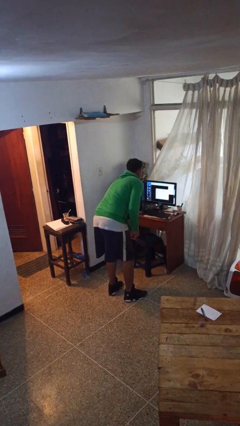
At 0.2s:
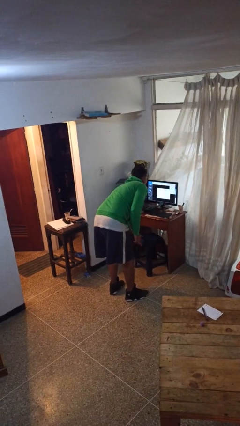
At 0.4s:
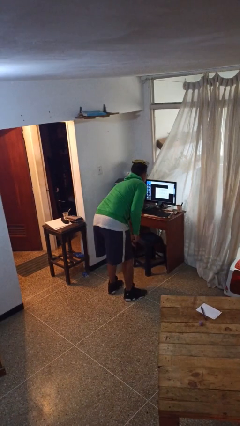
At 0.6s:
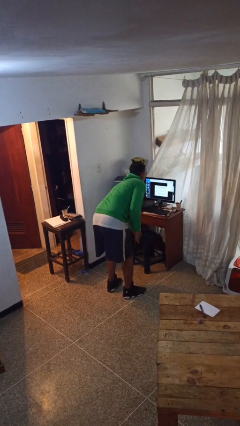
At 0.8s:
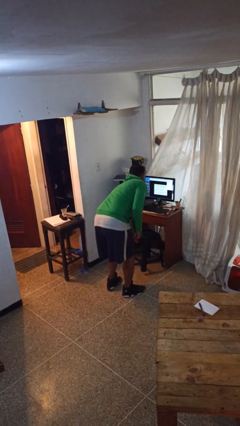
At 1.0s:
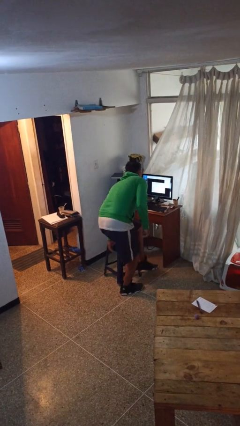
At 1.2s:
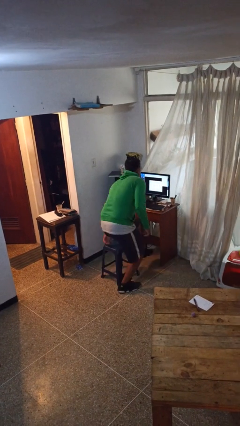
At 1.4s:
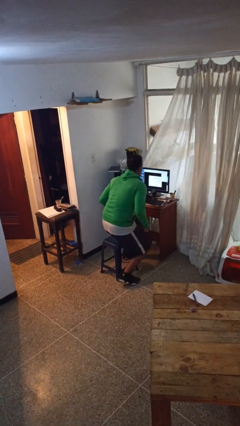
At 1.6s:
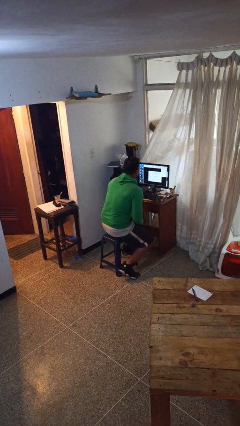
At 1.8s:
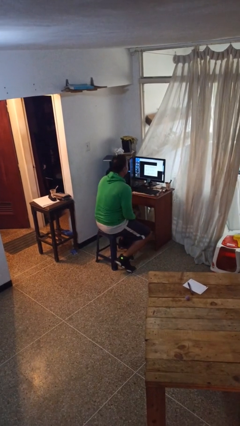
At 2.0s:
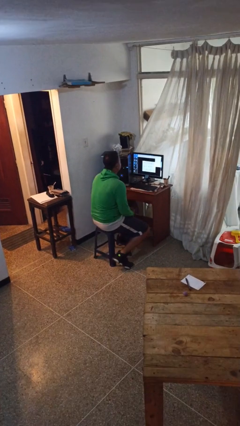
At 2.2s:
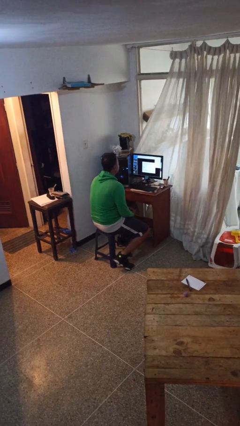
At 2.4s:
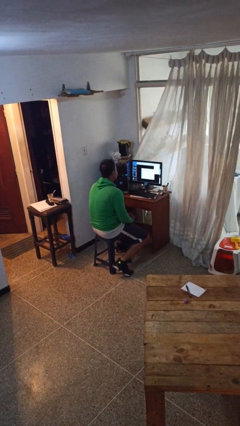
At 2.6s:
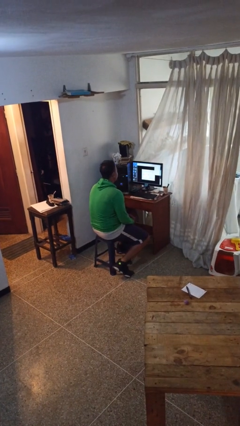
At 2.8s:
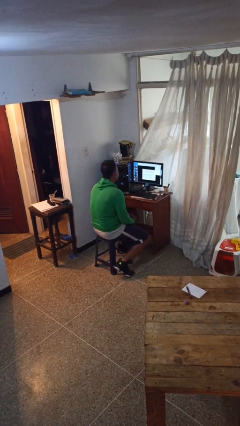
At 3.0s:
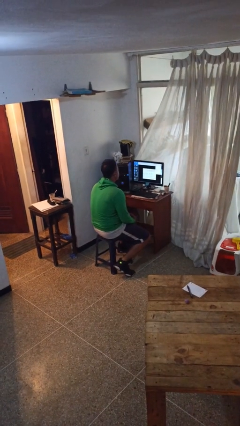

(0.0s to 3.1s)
person sits down

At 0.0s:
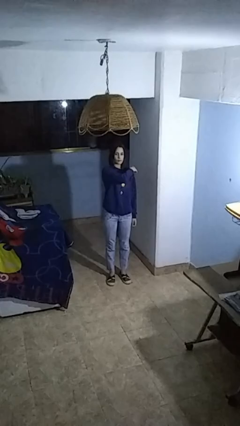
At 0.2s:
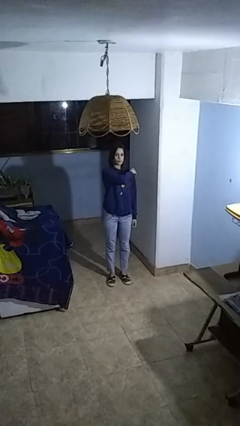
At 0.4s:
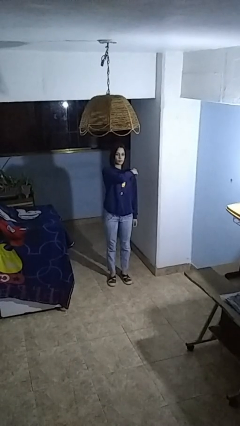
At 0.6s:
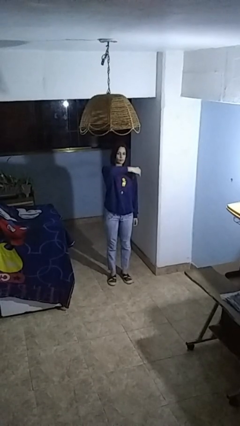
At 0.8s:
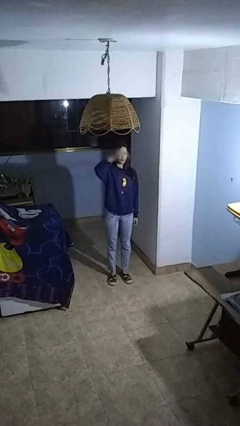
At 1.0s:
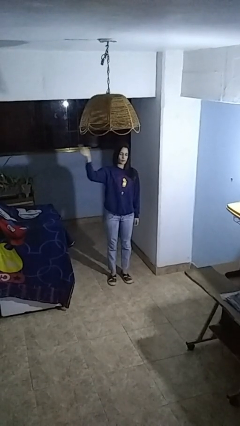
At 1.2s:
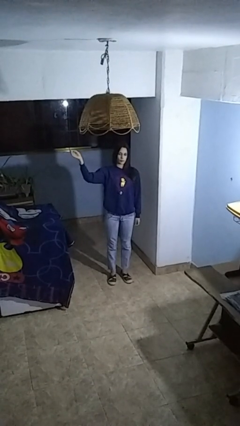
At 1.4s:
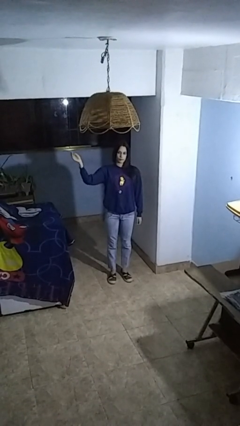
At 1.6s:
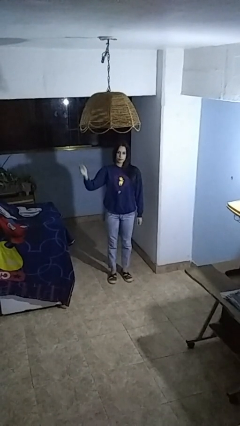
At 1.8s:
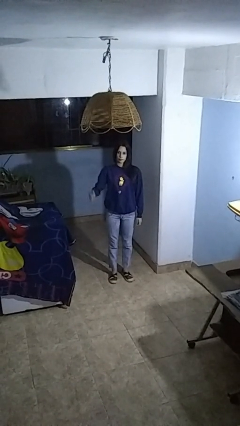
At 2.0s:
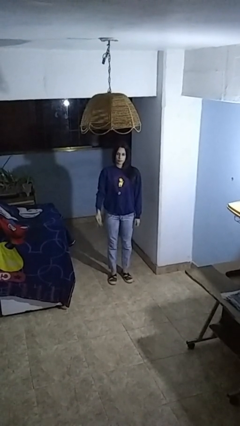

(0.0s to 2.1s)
person gestures swipe right

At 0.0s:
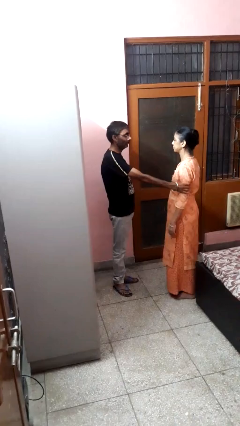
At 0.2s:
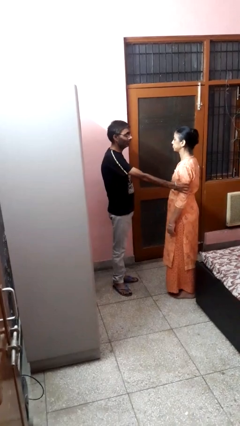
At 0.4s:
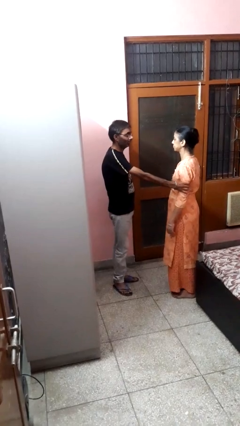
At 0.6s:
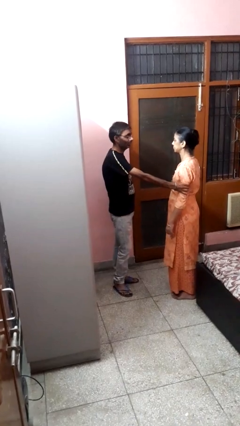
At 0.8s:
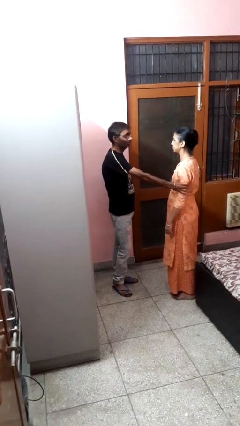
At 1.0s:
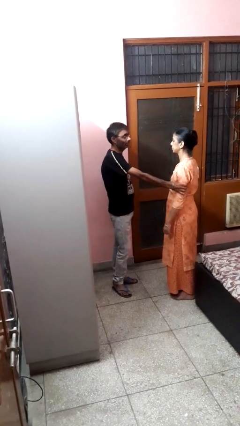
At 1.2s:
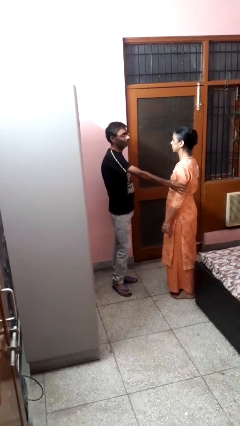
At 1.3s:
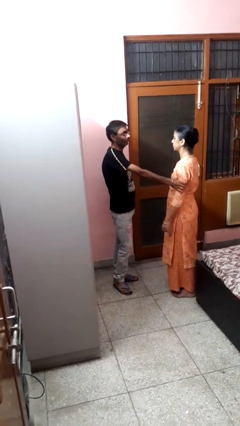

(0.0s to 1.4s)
person grabs person by bicep

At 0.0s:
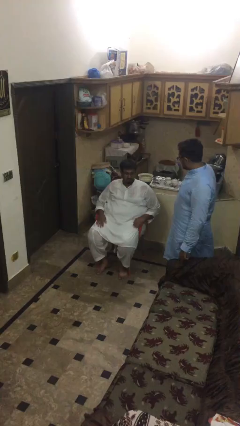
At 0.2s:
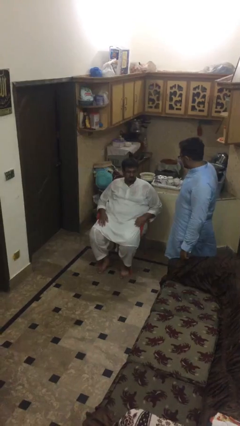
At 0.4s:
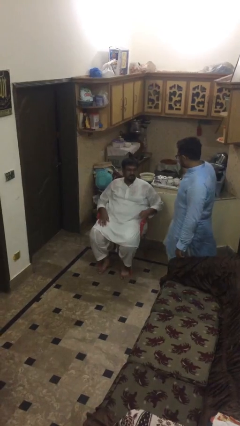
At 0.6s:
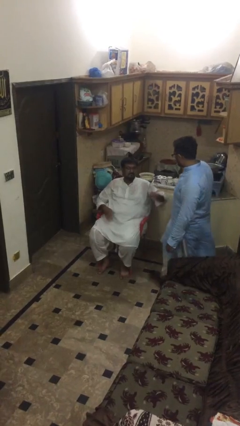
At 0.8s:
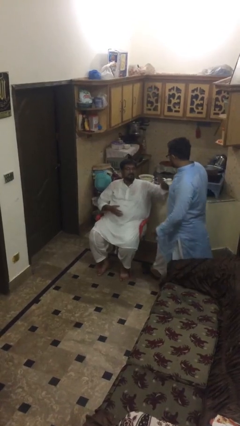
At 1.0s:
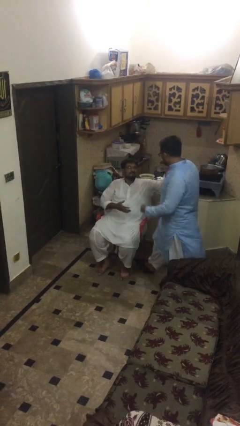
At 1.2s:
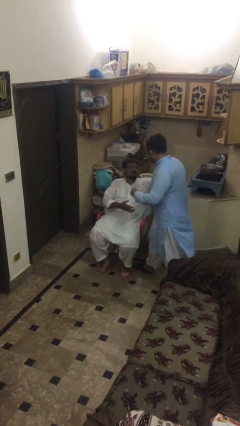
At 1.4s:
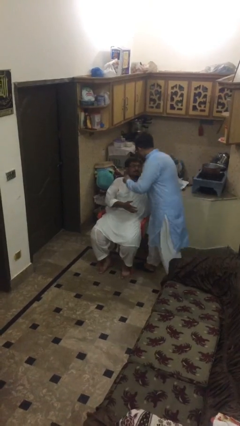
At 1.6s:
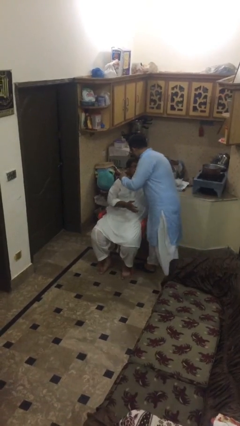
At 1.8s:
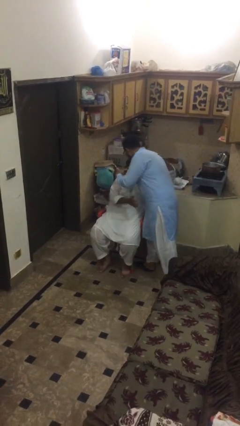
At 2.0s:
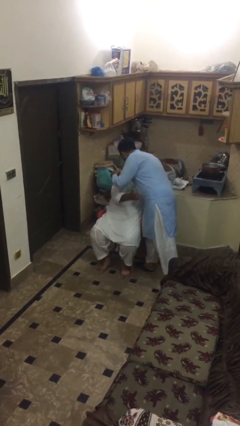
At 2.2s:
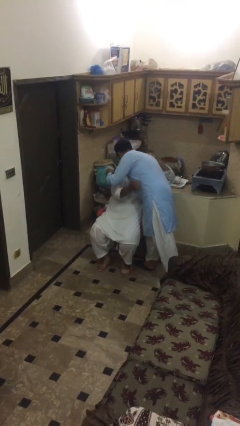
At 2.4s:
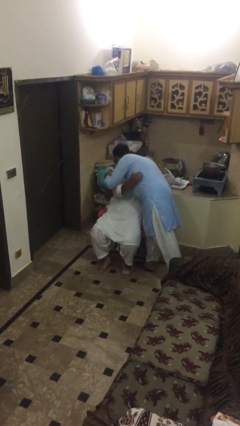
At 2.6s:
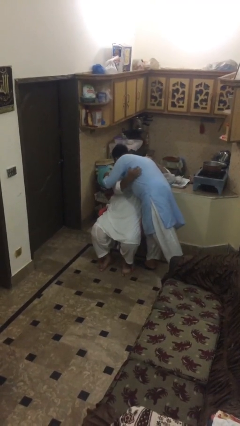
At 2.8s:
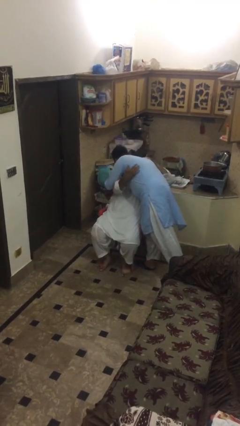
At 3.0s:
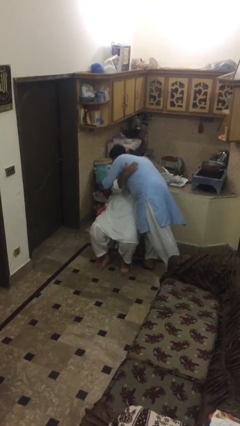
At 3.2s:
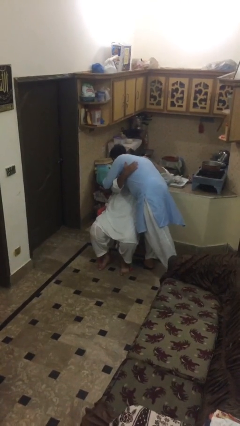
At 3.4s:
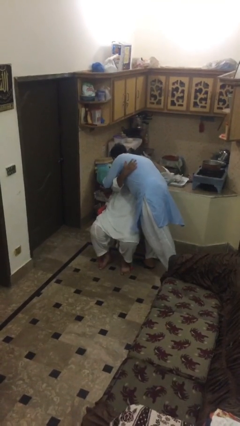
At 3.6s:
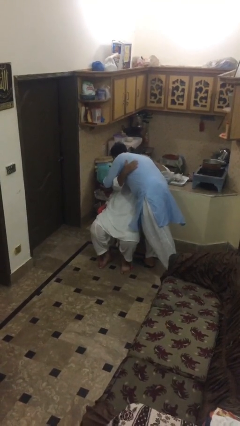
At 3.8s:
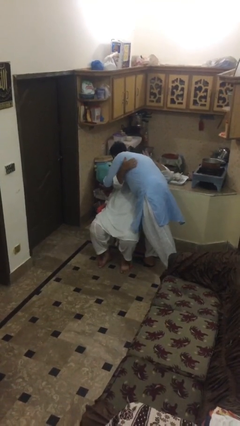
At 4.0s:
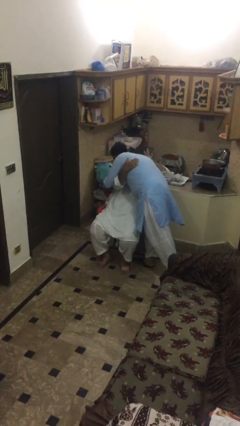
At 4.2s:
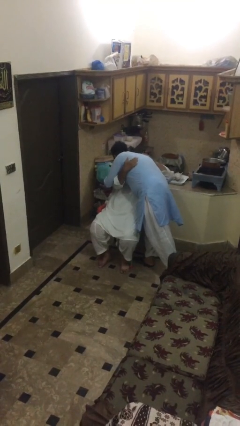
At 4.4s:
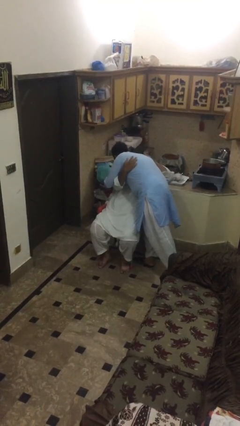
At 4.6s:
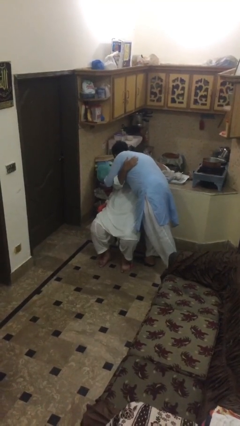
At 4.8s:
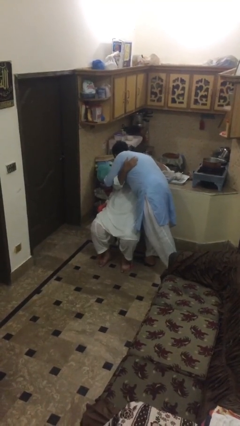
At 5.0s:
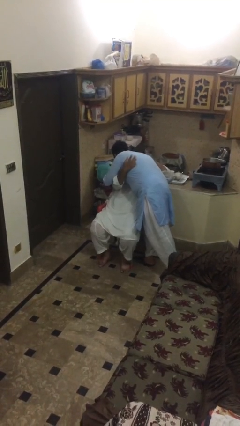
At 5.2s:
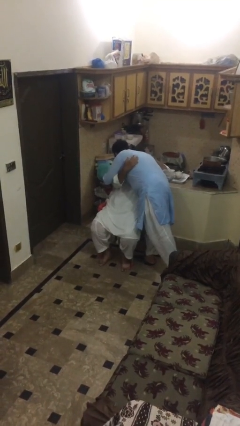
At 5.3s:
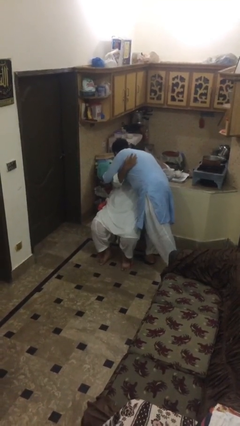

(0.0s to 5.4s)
person embraces person

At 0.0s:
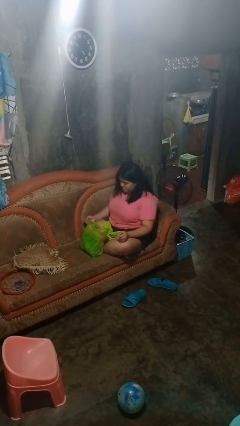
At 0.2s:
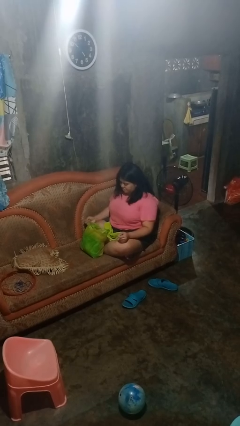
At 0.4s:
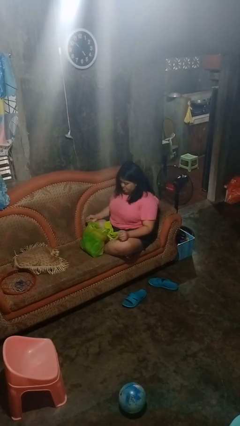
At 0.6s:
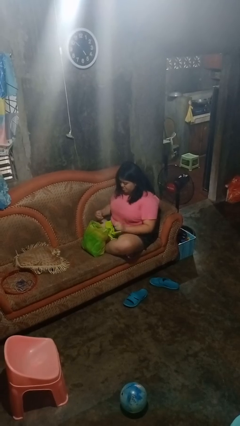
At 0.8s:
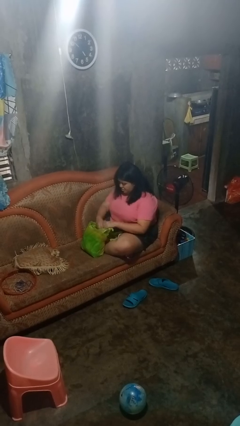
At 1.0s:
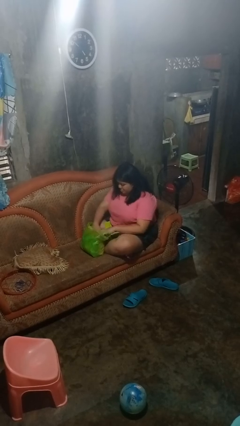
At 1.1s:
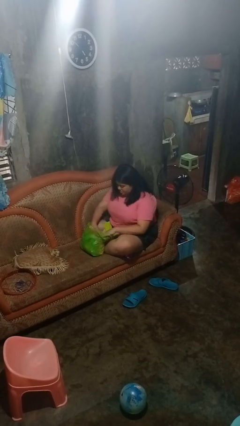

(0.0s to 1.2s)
person searches in bag

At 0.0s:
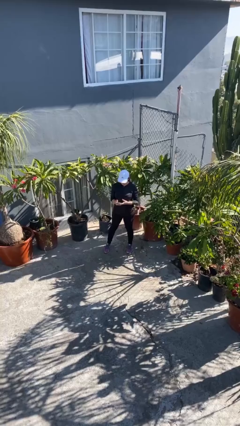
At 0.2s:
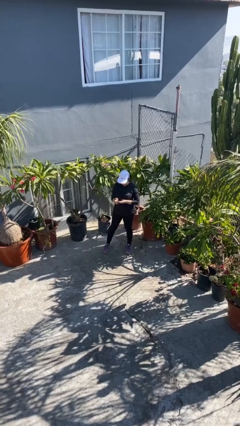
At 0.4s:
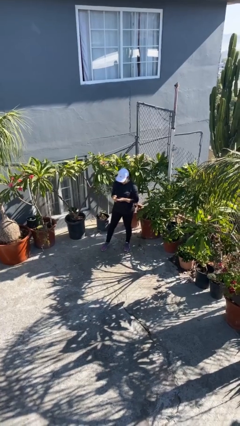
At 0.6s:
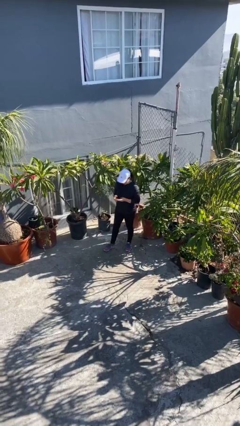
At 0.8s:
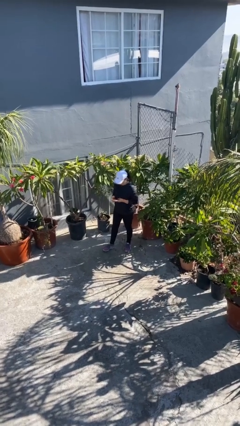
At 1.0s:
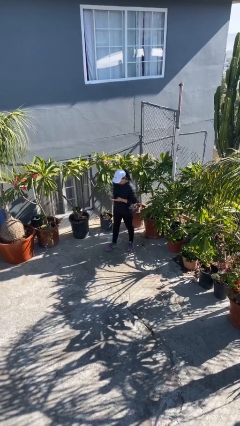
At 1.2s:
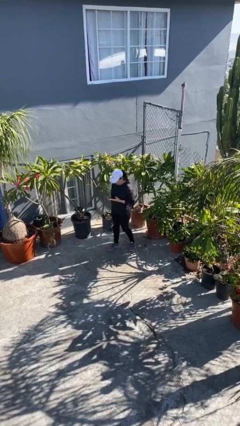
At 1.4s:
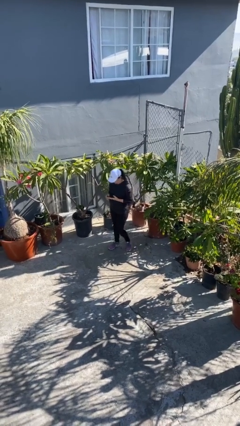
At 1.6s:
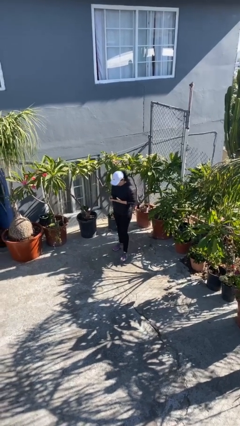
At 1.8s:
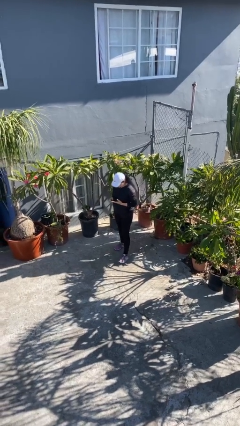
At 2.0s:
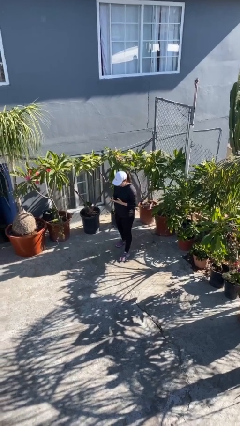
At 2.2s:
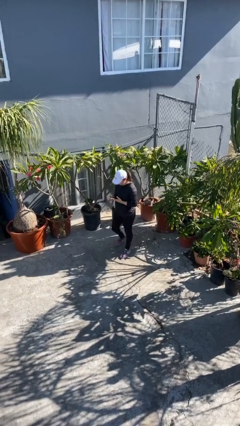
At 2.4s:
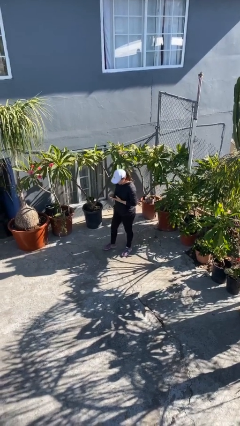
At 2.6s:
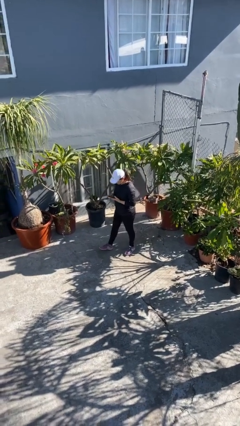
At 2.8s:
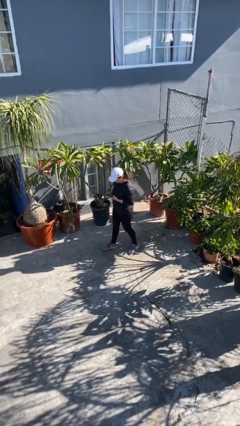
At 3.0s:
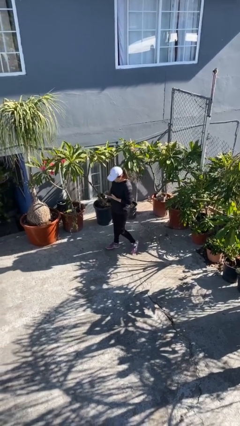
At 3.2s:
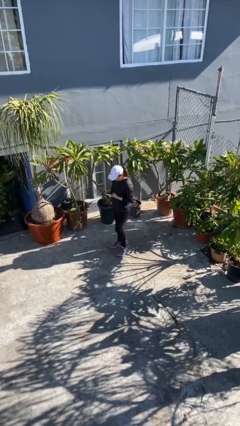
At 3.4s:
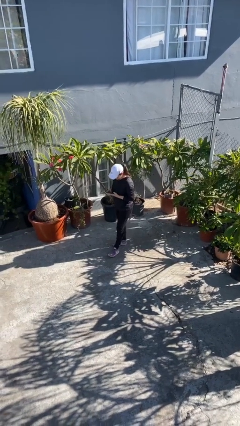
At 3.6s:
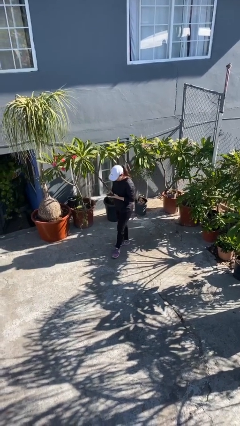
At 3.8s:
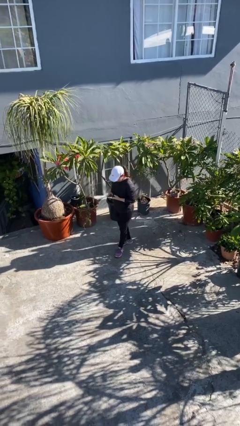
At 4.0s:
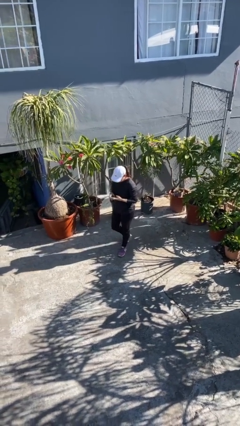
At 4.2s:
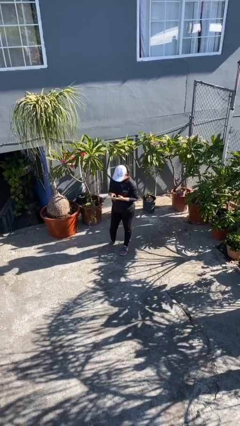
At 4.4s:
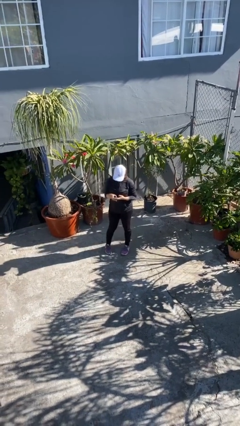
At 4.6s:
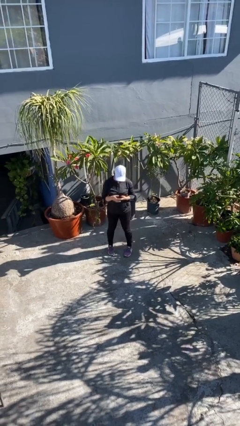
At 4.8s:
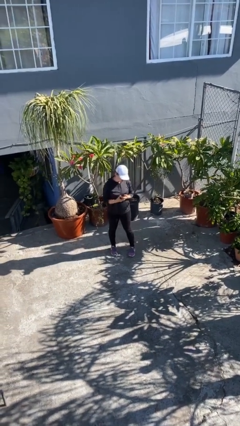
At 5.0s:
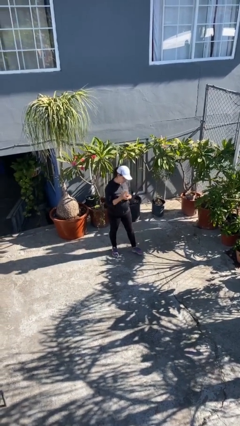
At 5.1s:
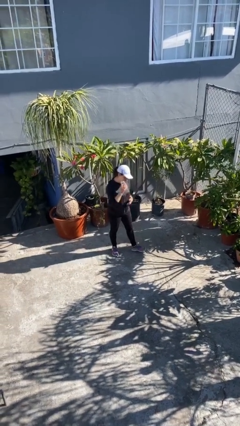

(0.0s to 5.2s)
person texts on phone
